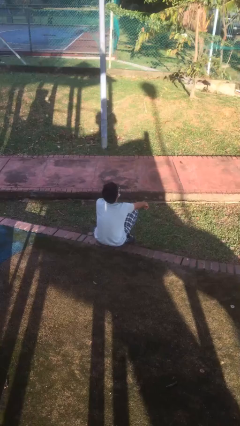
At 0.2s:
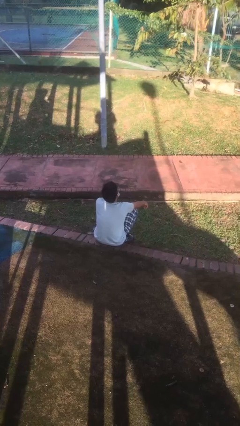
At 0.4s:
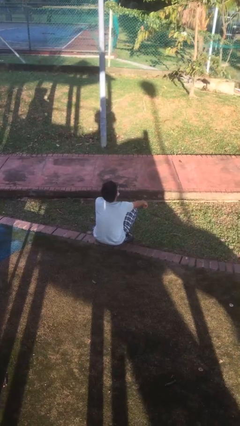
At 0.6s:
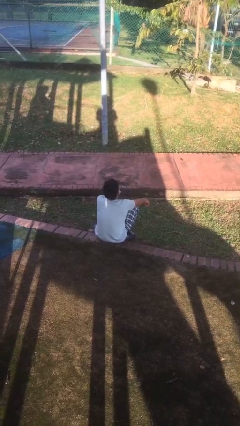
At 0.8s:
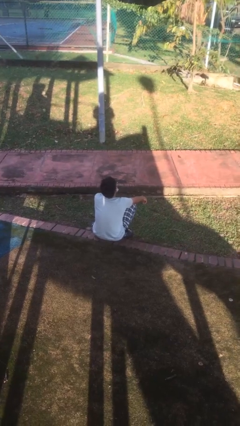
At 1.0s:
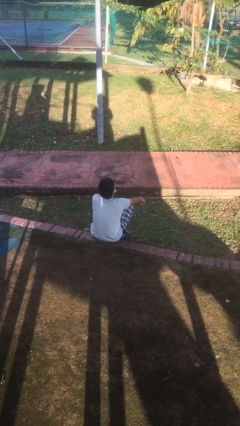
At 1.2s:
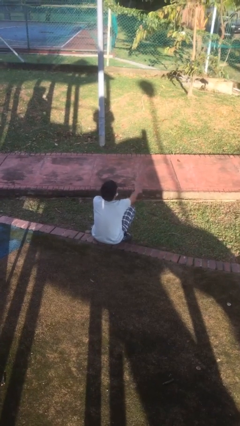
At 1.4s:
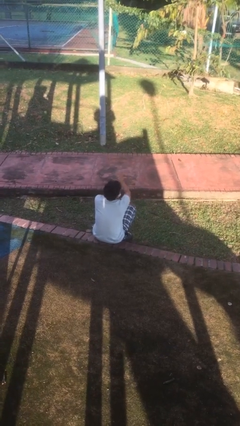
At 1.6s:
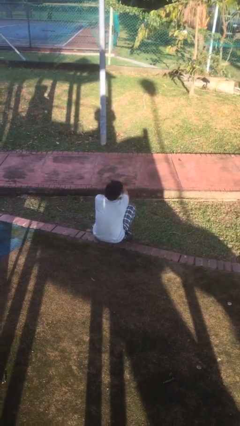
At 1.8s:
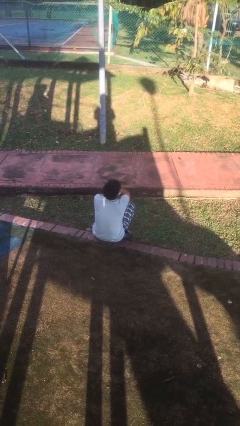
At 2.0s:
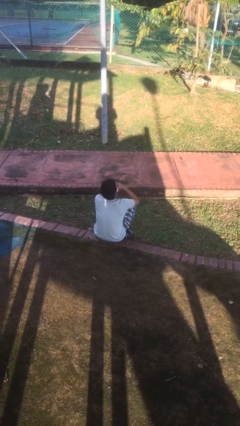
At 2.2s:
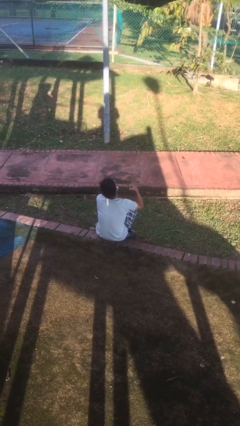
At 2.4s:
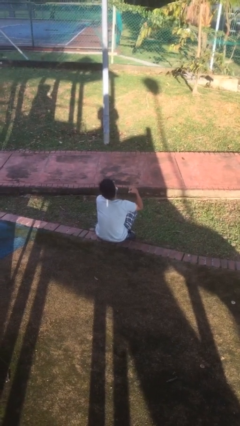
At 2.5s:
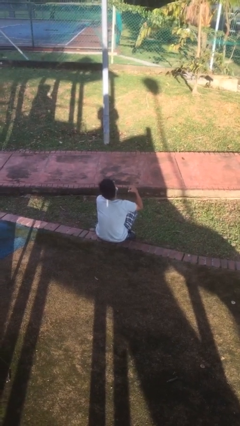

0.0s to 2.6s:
person gestures cut

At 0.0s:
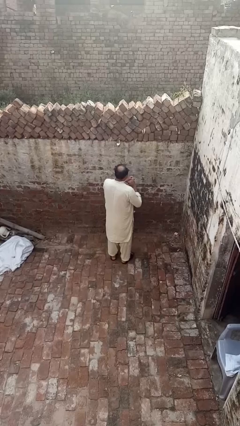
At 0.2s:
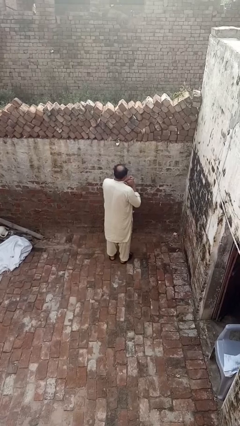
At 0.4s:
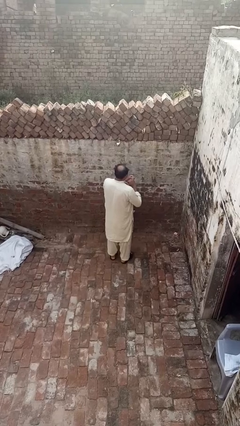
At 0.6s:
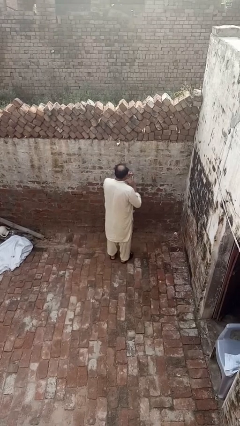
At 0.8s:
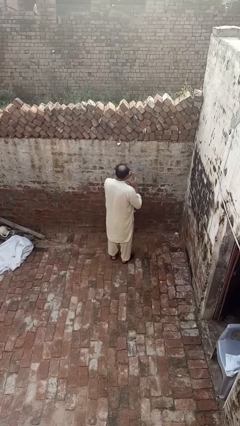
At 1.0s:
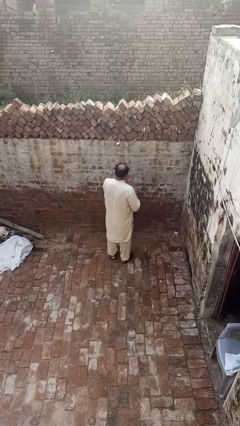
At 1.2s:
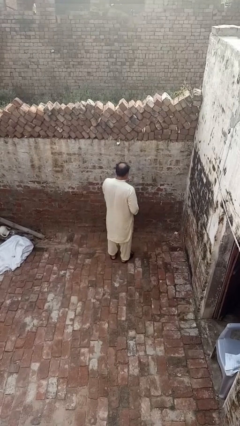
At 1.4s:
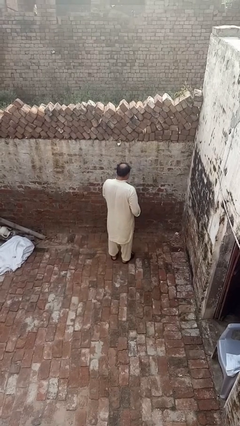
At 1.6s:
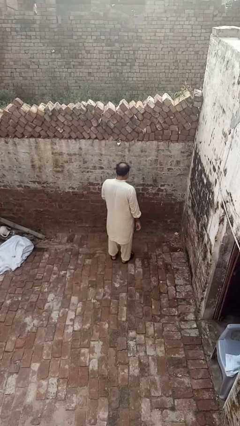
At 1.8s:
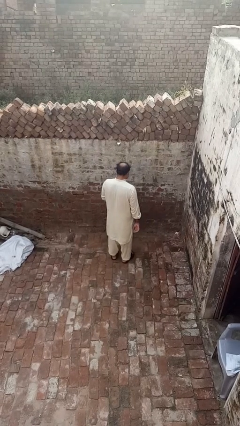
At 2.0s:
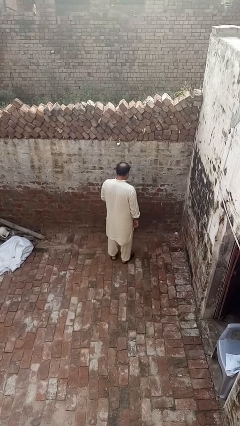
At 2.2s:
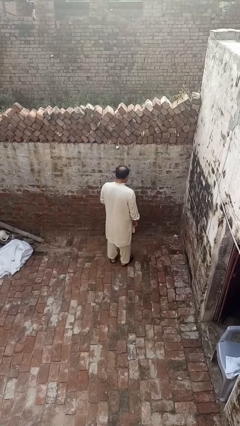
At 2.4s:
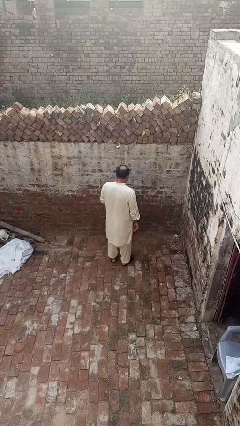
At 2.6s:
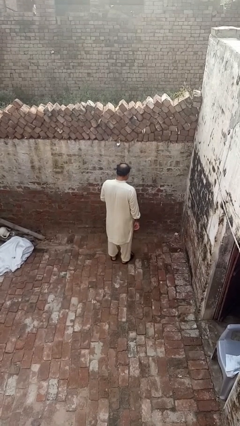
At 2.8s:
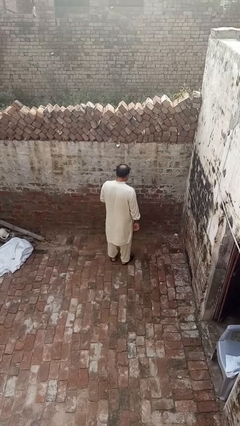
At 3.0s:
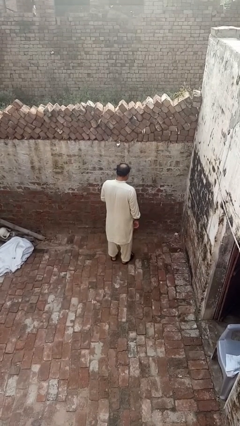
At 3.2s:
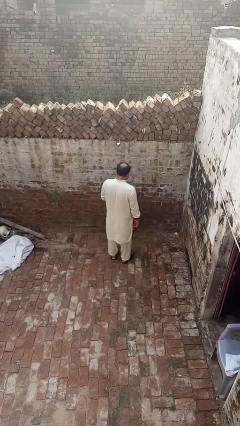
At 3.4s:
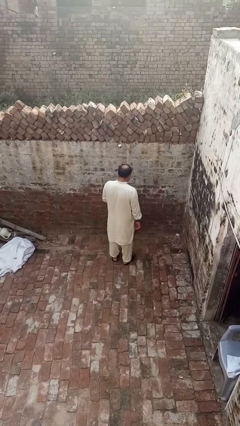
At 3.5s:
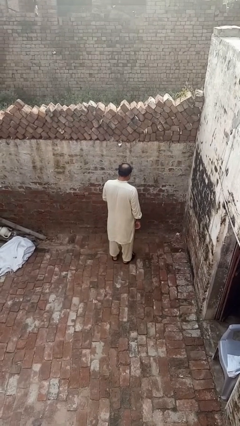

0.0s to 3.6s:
person takes off ring

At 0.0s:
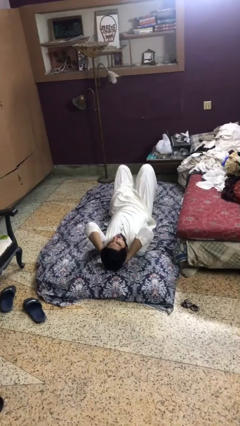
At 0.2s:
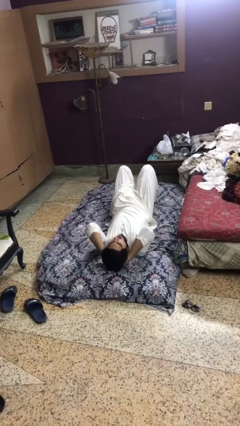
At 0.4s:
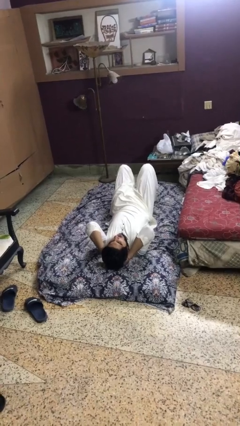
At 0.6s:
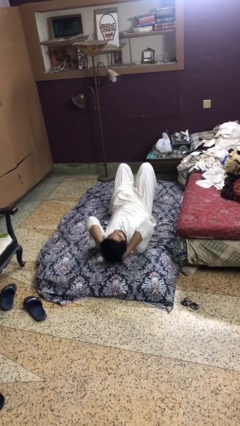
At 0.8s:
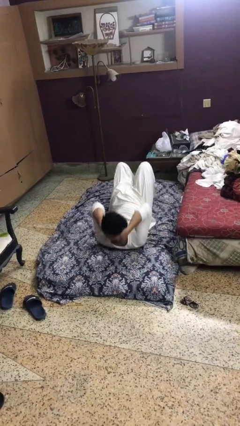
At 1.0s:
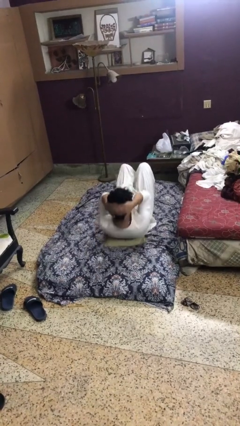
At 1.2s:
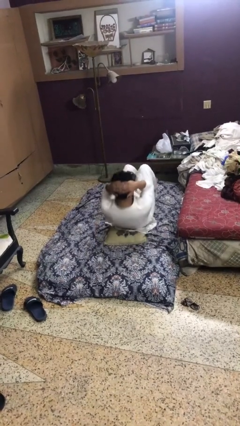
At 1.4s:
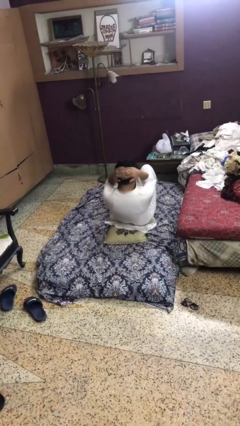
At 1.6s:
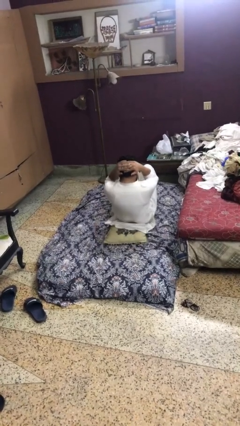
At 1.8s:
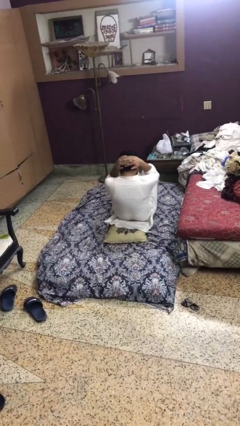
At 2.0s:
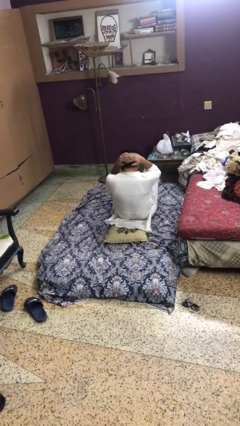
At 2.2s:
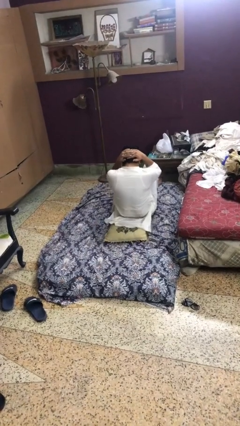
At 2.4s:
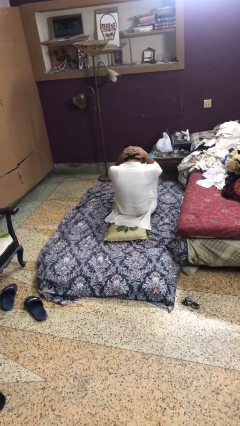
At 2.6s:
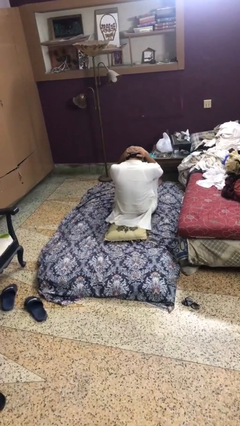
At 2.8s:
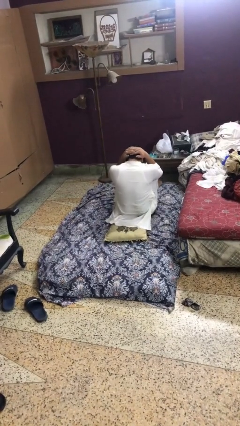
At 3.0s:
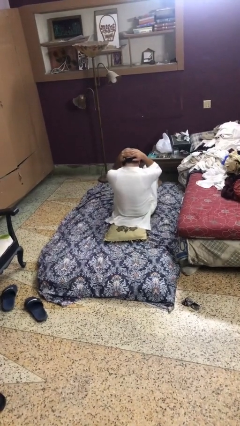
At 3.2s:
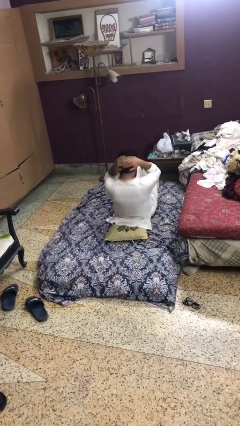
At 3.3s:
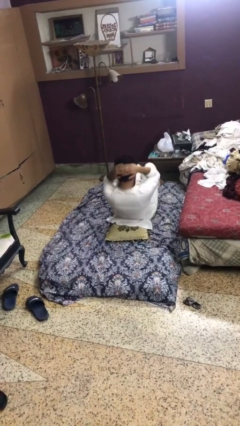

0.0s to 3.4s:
person exercises with situp

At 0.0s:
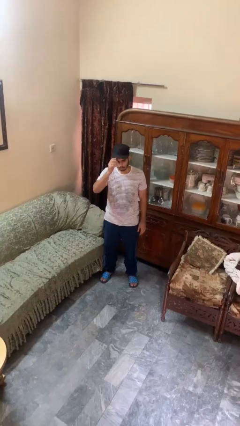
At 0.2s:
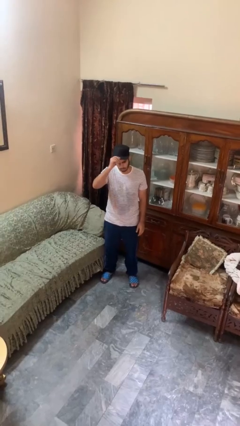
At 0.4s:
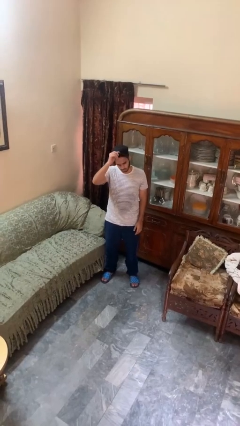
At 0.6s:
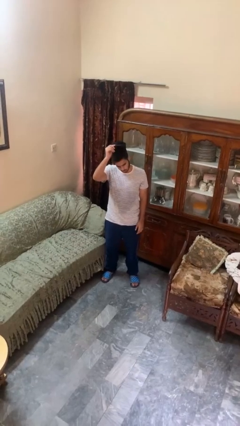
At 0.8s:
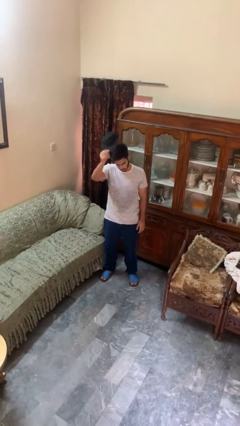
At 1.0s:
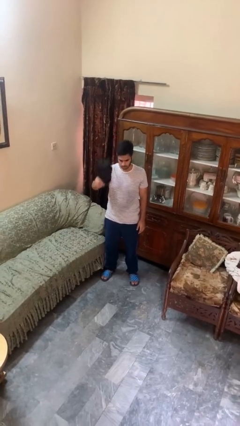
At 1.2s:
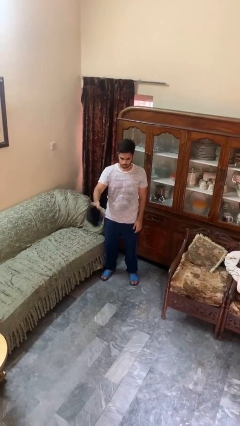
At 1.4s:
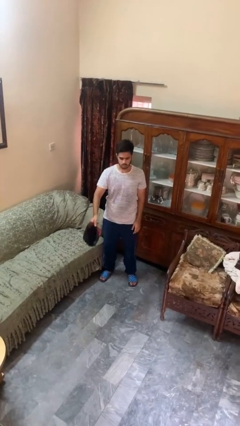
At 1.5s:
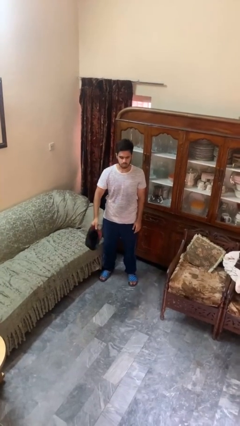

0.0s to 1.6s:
person takes off hat

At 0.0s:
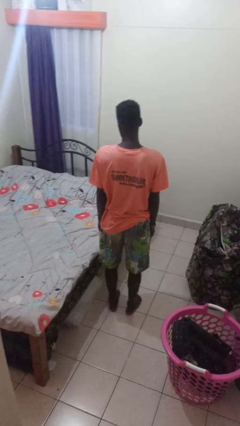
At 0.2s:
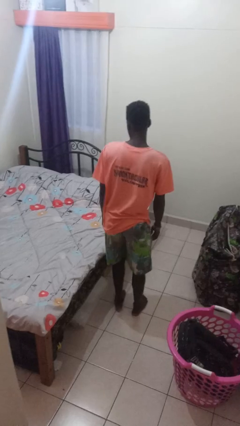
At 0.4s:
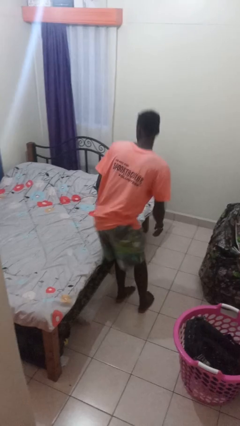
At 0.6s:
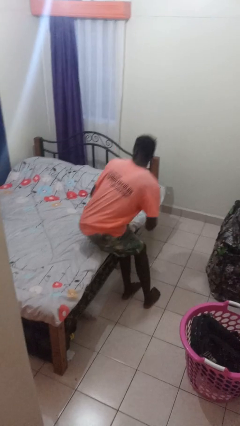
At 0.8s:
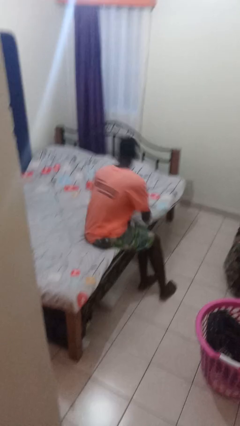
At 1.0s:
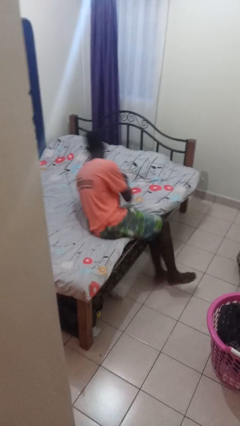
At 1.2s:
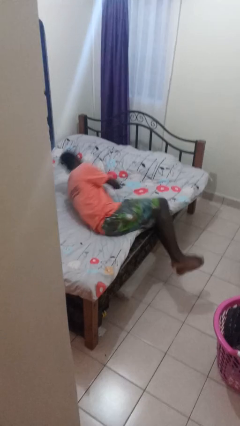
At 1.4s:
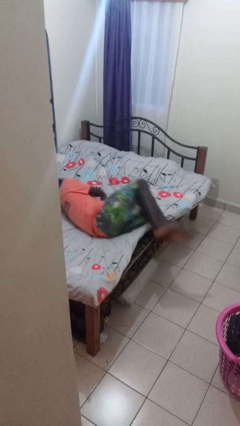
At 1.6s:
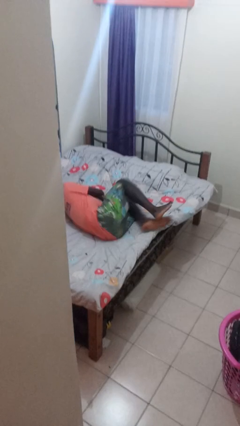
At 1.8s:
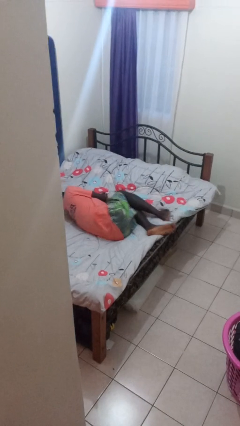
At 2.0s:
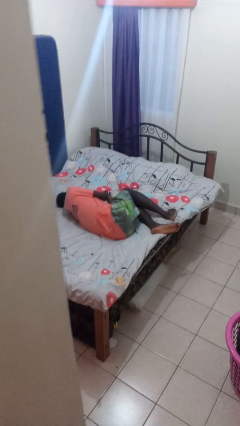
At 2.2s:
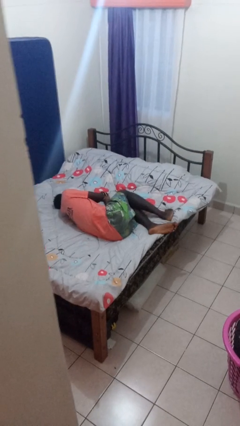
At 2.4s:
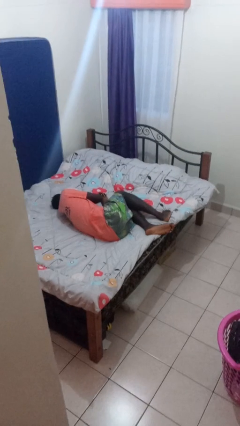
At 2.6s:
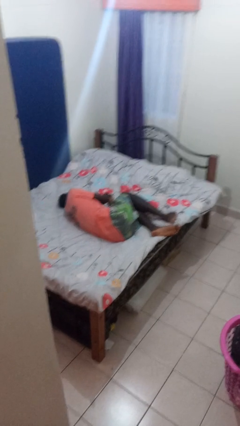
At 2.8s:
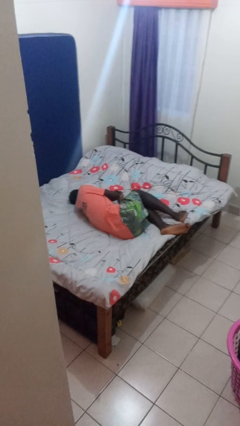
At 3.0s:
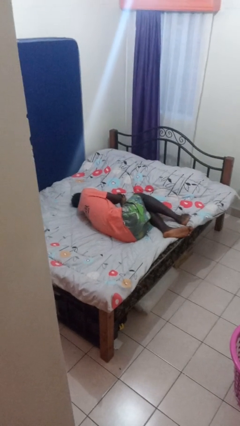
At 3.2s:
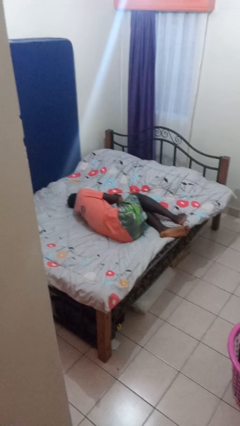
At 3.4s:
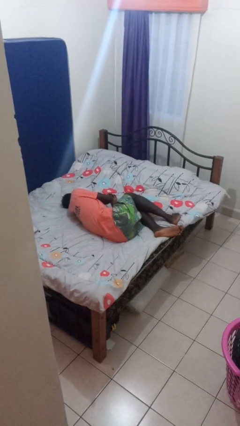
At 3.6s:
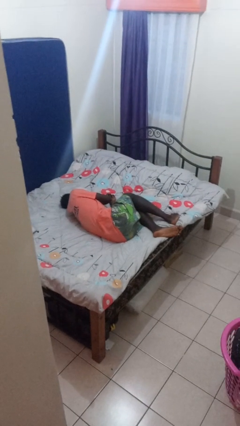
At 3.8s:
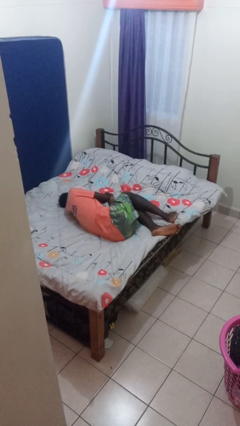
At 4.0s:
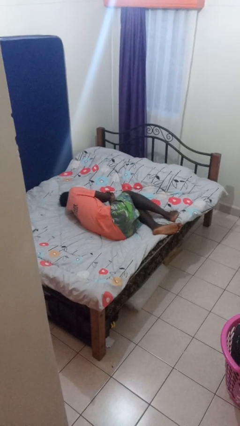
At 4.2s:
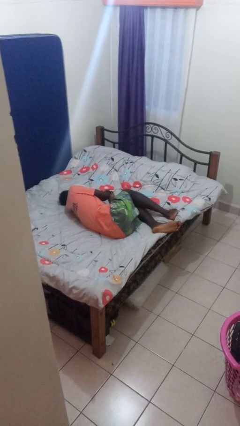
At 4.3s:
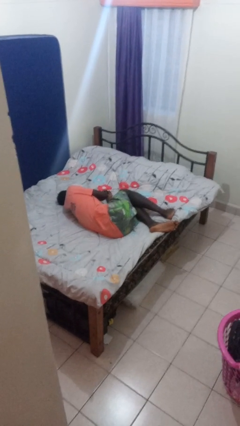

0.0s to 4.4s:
person lies down on bed

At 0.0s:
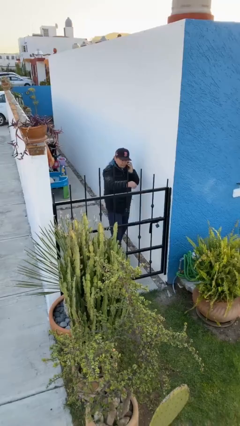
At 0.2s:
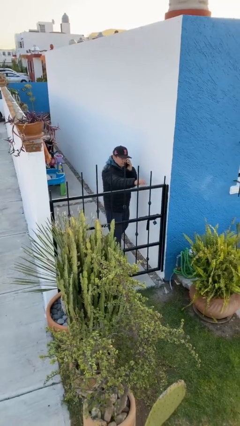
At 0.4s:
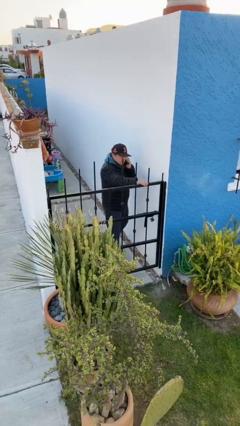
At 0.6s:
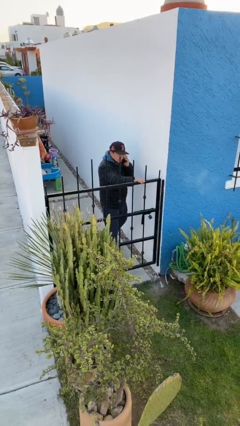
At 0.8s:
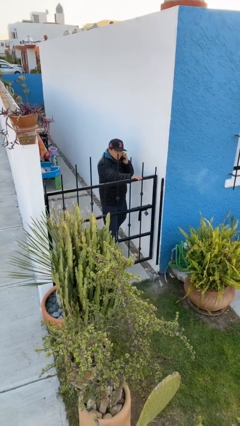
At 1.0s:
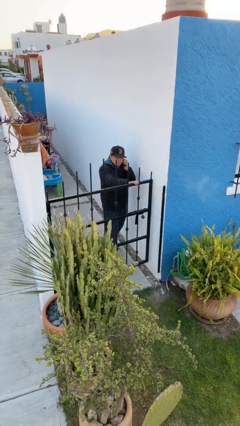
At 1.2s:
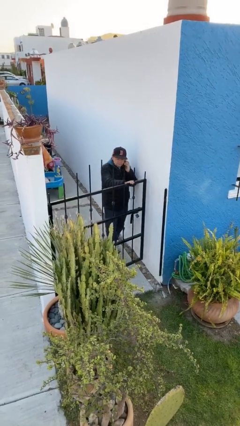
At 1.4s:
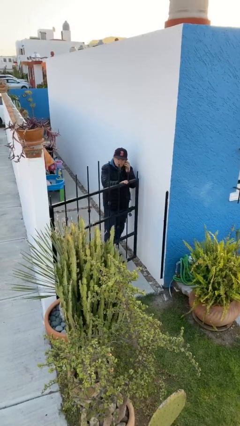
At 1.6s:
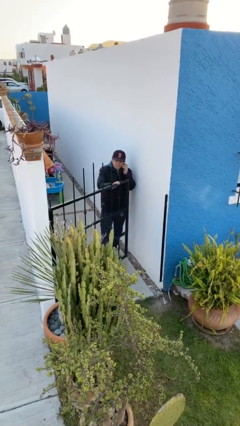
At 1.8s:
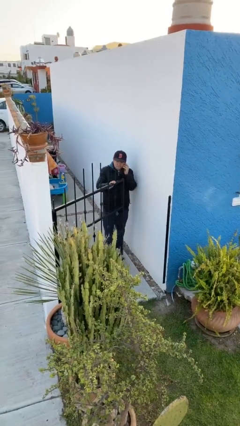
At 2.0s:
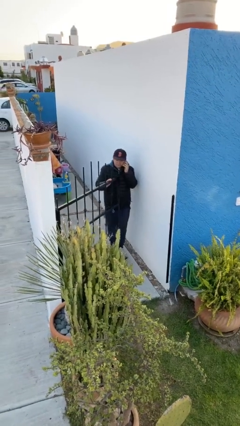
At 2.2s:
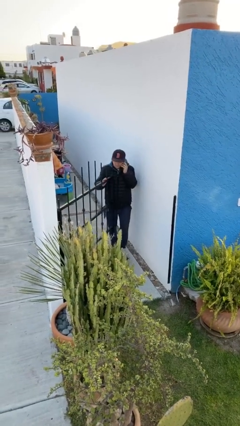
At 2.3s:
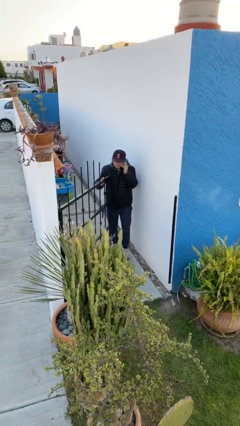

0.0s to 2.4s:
person opens facility door
